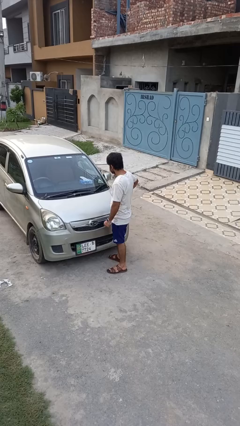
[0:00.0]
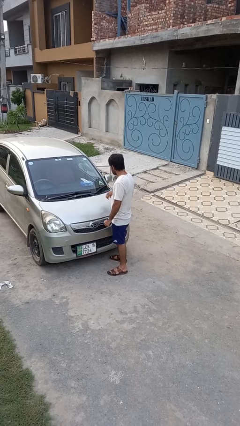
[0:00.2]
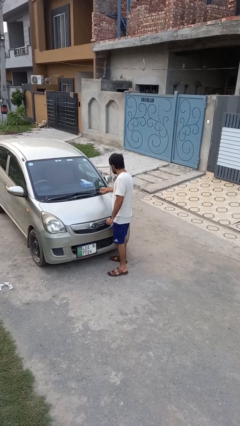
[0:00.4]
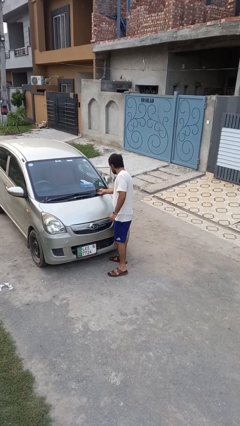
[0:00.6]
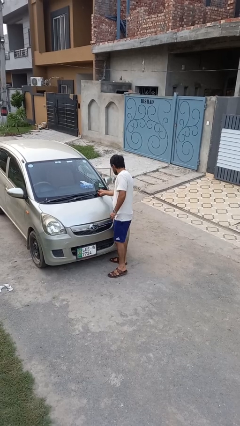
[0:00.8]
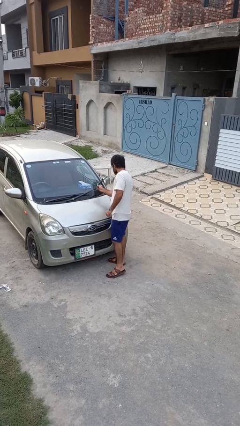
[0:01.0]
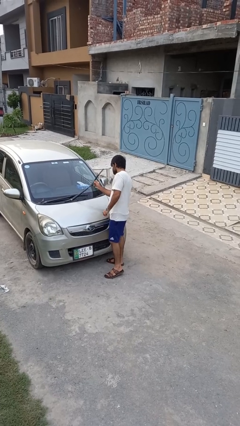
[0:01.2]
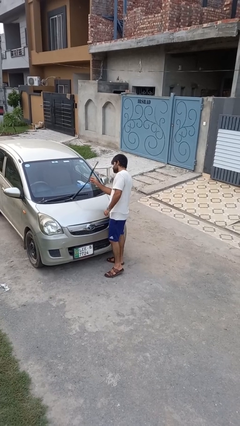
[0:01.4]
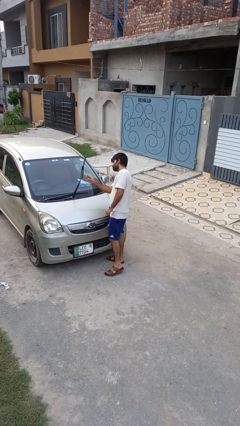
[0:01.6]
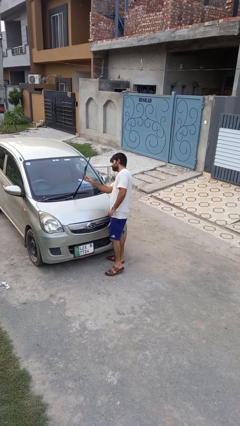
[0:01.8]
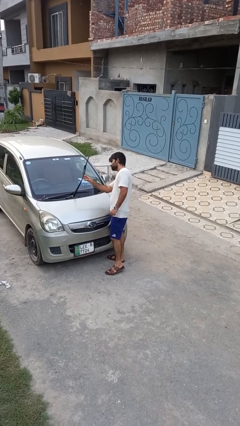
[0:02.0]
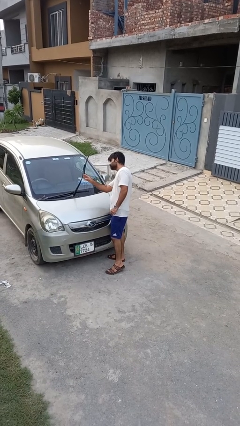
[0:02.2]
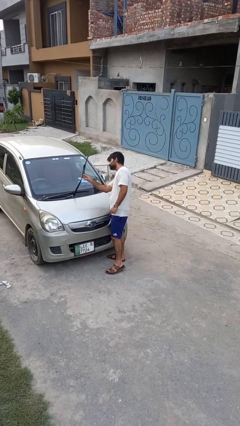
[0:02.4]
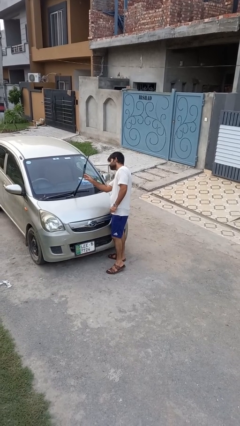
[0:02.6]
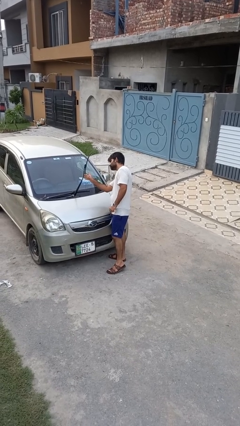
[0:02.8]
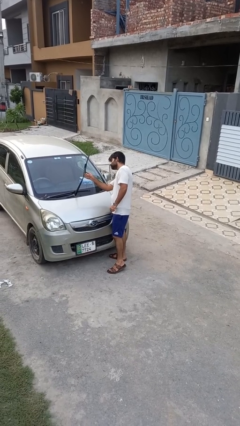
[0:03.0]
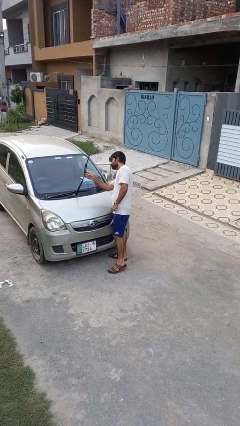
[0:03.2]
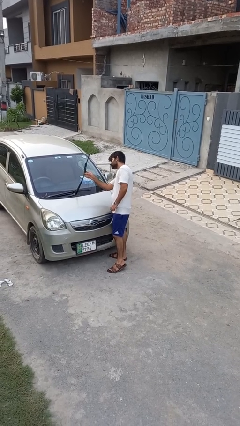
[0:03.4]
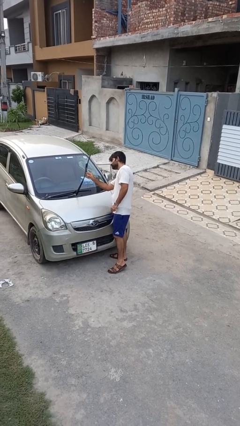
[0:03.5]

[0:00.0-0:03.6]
person flips up car wipers

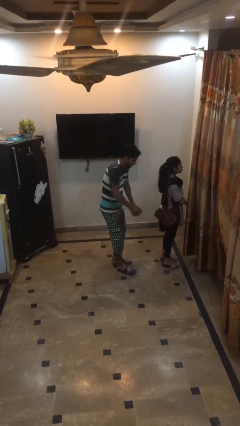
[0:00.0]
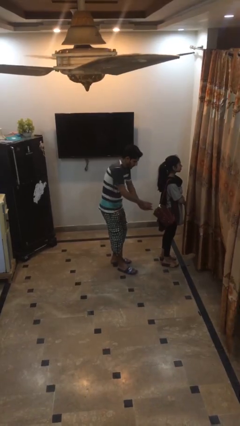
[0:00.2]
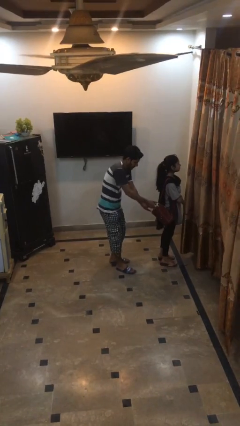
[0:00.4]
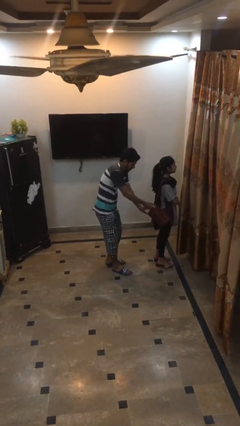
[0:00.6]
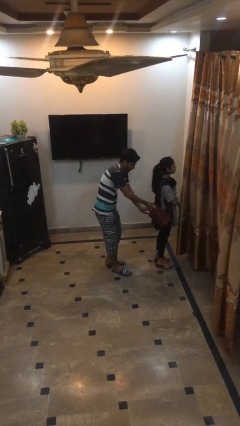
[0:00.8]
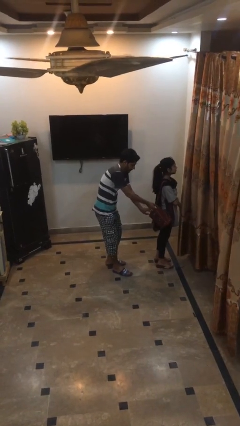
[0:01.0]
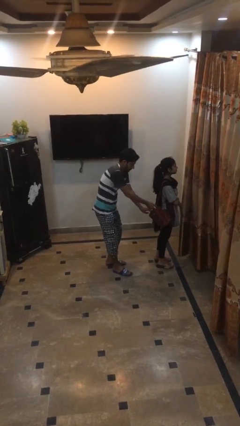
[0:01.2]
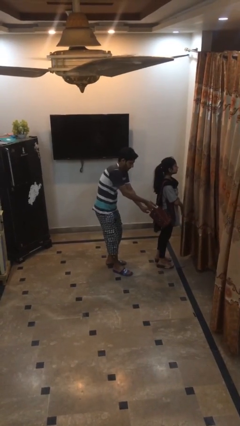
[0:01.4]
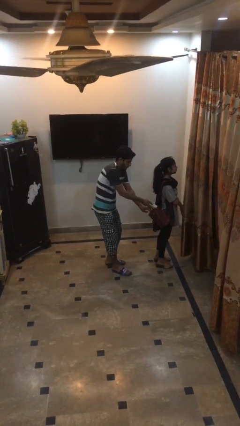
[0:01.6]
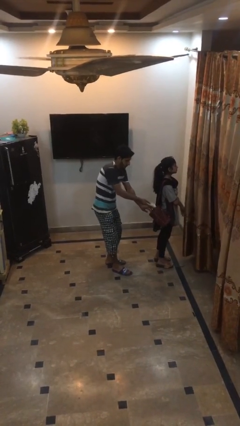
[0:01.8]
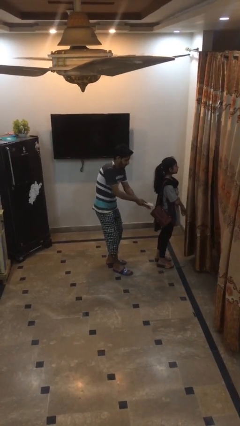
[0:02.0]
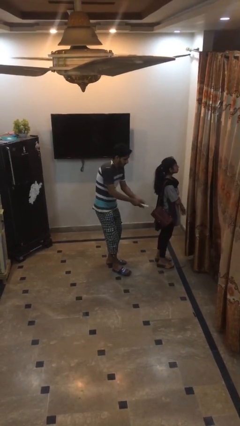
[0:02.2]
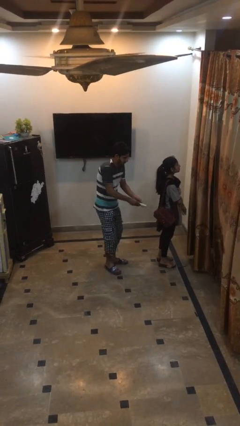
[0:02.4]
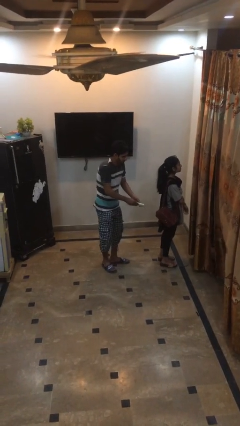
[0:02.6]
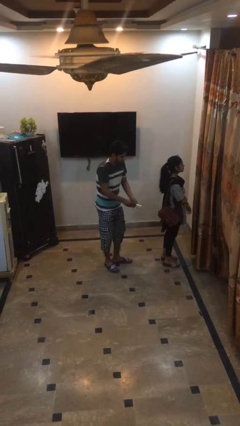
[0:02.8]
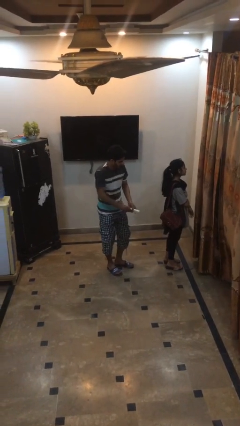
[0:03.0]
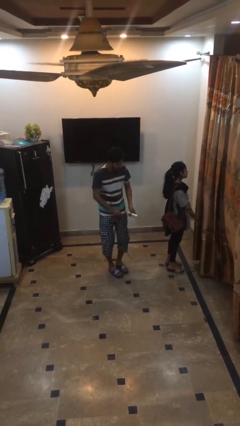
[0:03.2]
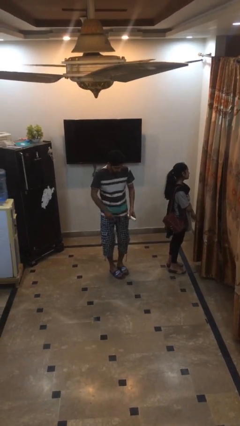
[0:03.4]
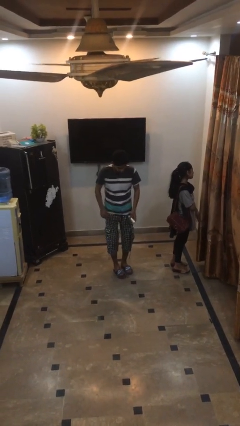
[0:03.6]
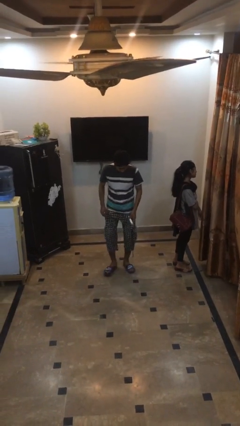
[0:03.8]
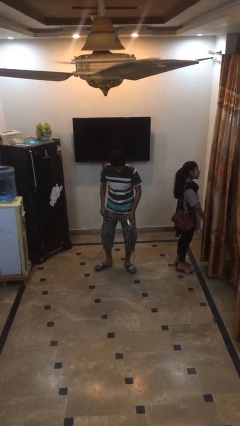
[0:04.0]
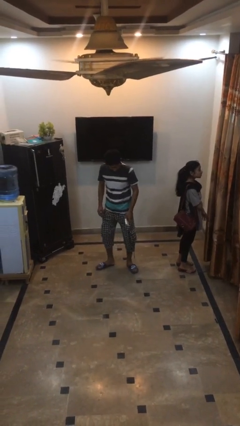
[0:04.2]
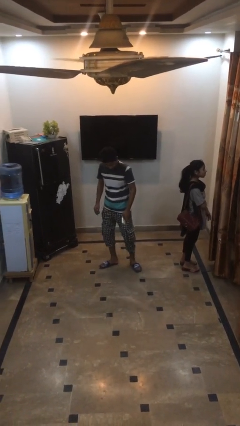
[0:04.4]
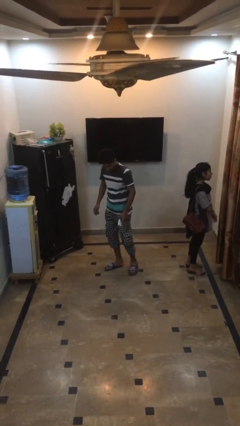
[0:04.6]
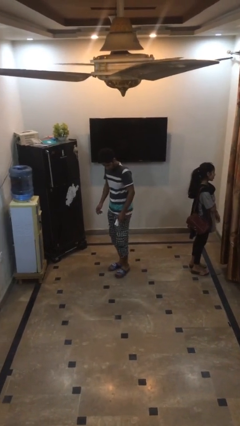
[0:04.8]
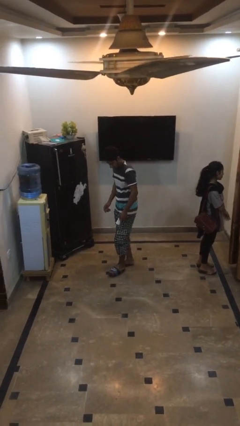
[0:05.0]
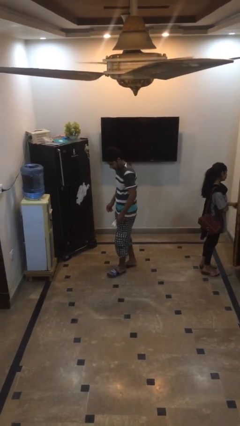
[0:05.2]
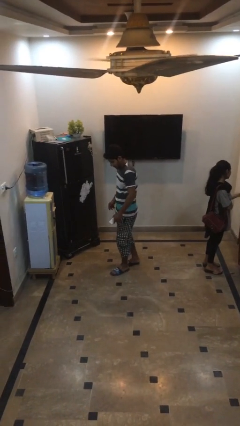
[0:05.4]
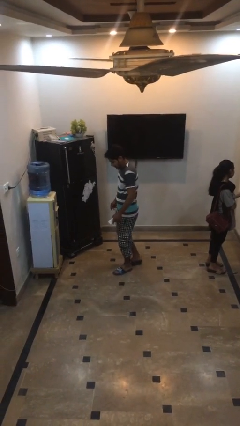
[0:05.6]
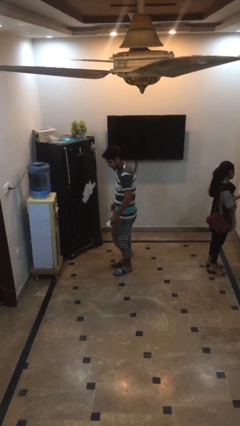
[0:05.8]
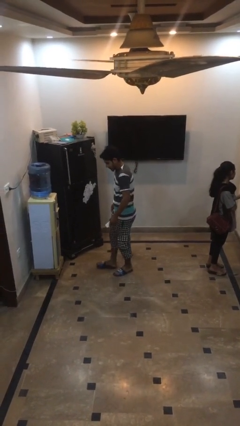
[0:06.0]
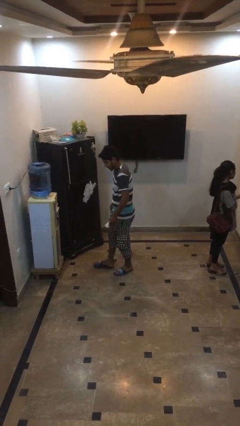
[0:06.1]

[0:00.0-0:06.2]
person steals object from person

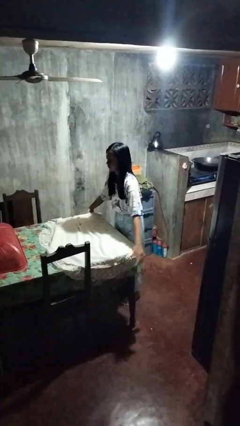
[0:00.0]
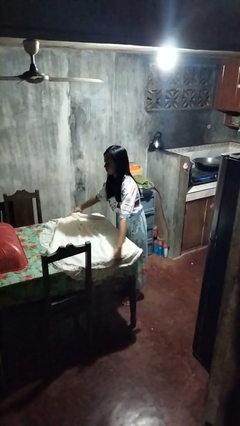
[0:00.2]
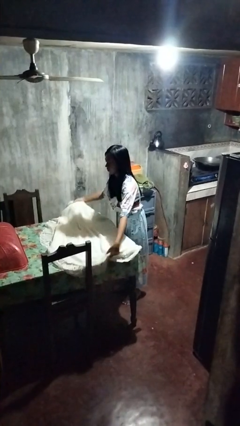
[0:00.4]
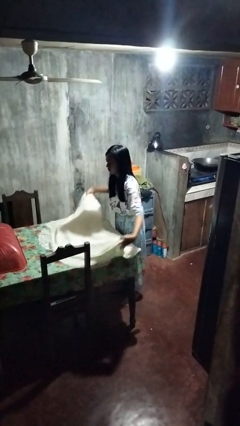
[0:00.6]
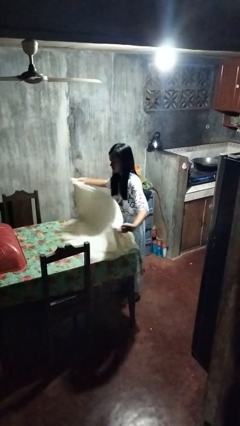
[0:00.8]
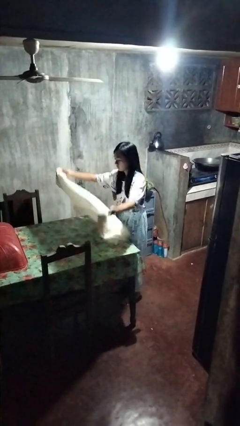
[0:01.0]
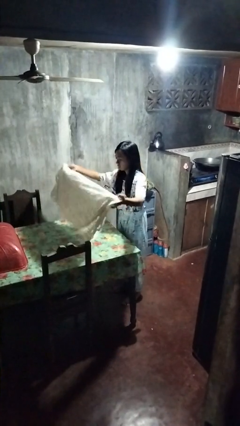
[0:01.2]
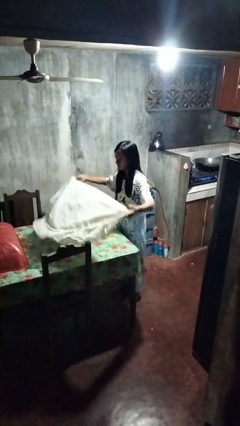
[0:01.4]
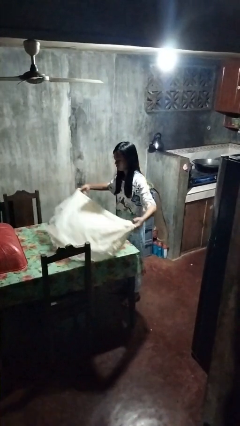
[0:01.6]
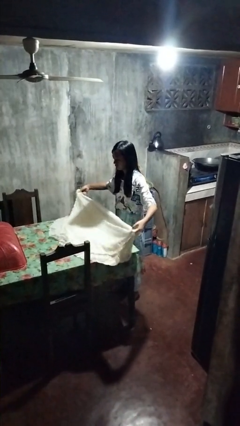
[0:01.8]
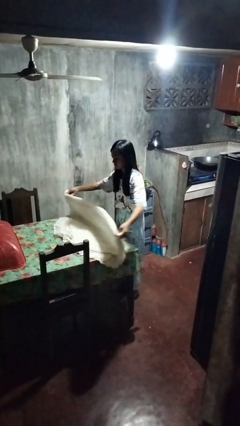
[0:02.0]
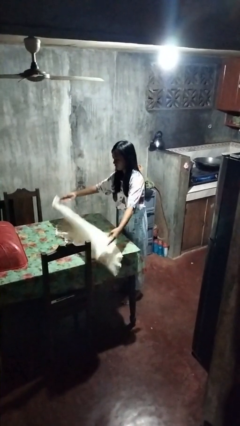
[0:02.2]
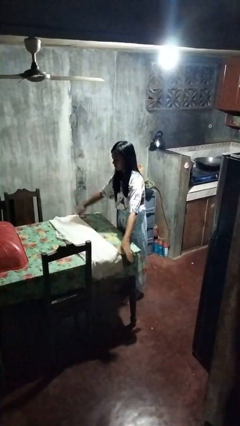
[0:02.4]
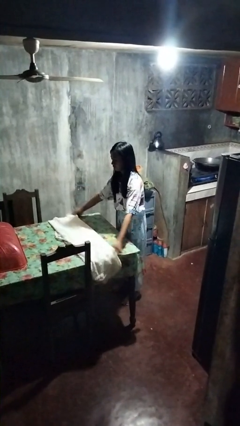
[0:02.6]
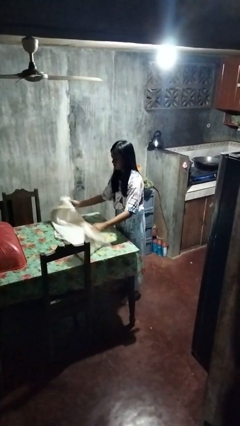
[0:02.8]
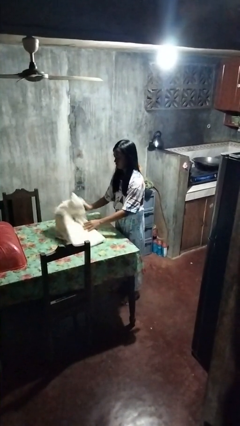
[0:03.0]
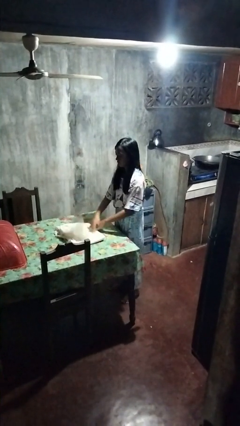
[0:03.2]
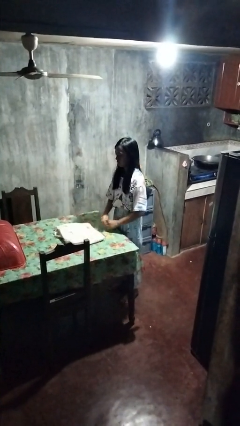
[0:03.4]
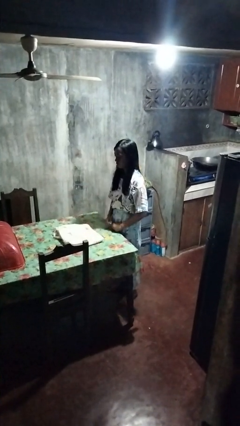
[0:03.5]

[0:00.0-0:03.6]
person folds tablecloth

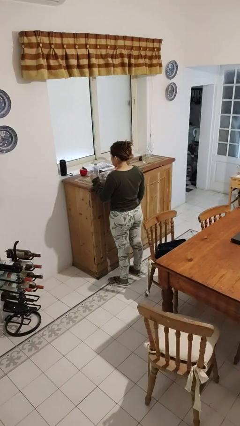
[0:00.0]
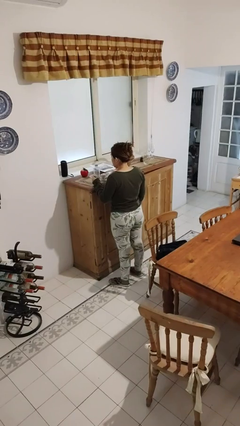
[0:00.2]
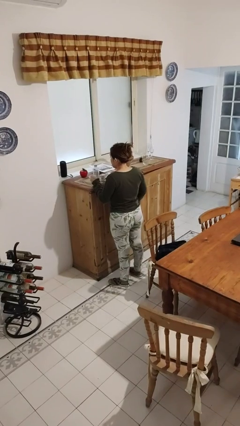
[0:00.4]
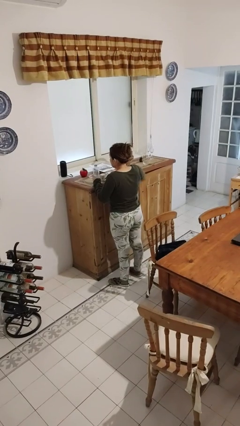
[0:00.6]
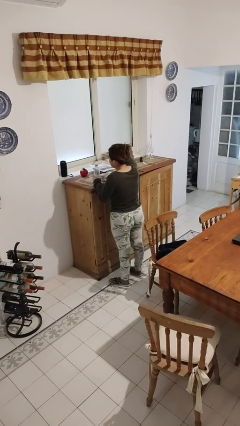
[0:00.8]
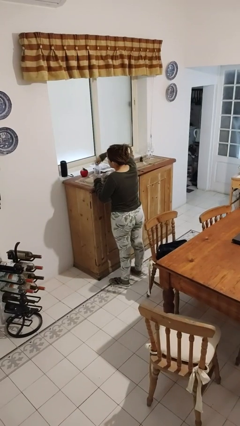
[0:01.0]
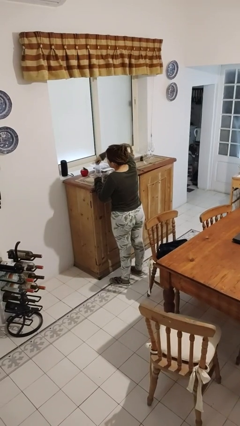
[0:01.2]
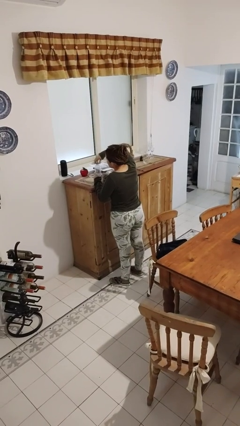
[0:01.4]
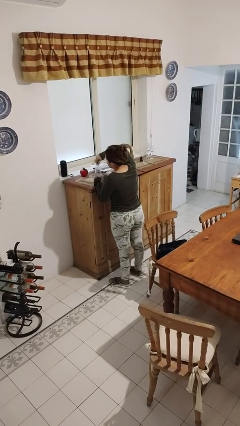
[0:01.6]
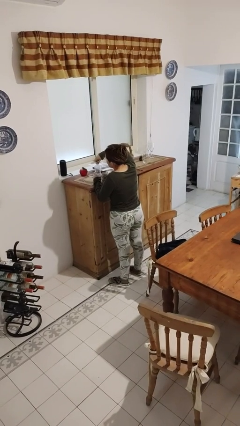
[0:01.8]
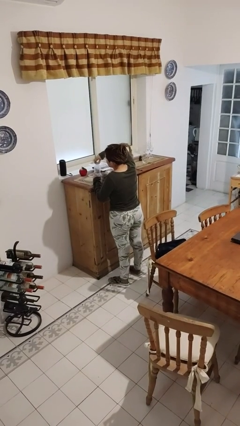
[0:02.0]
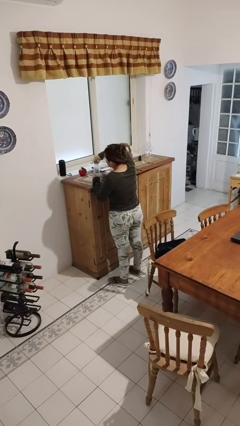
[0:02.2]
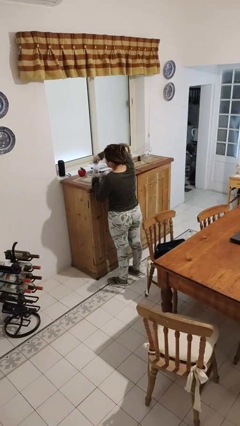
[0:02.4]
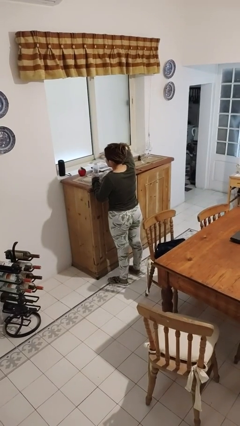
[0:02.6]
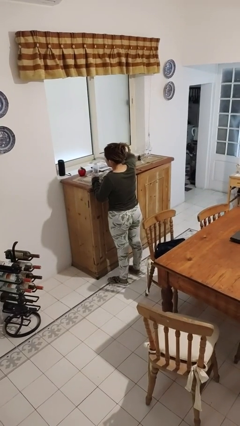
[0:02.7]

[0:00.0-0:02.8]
person unscrews lid from bottle

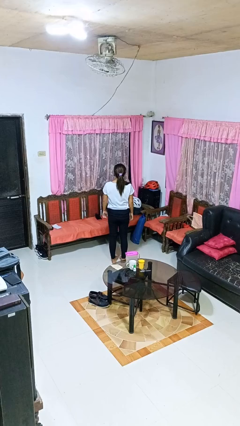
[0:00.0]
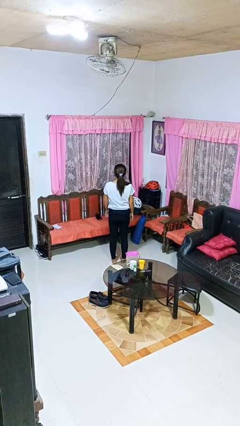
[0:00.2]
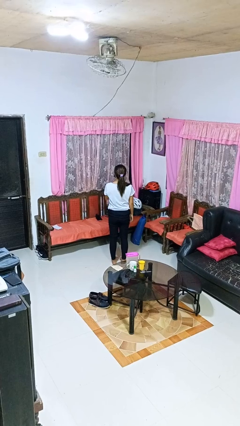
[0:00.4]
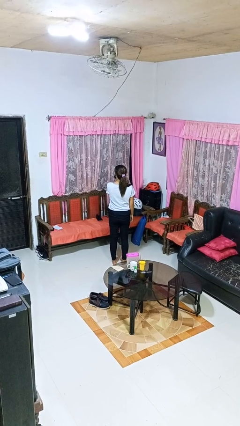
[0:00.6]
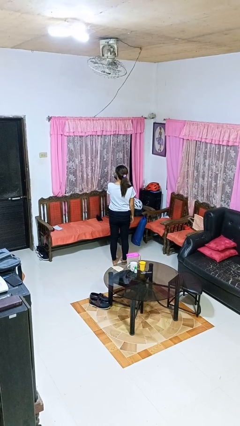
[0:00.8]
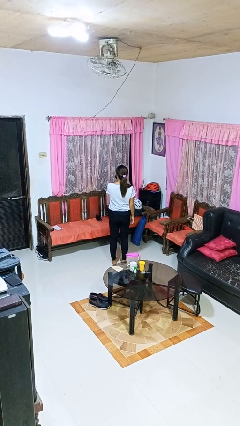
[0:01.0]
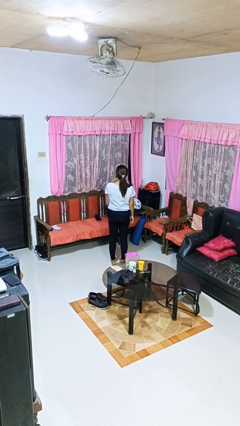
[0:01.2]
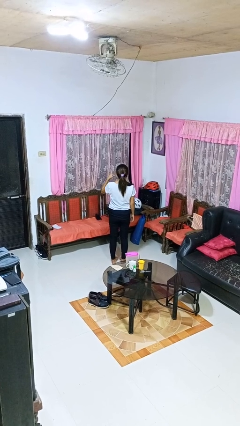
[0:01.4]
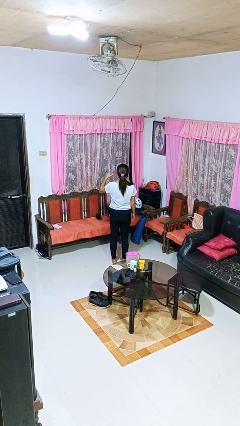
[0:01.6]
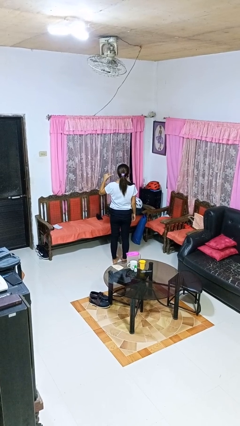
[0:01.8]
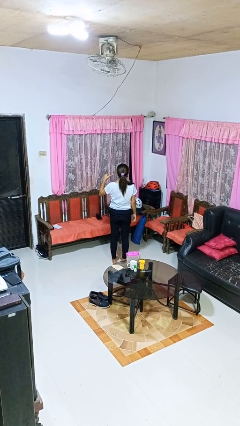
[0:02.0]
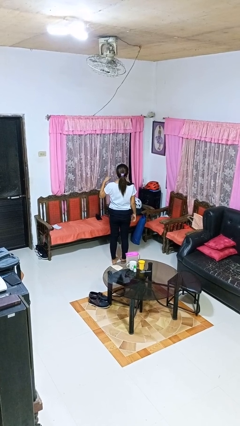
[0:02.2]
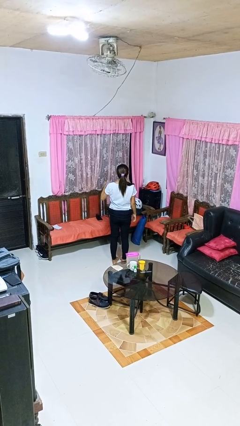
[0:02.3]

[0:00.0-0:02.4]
person gestures cut
